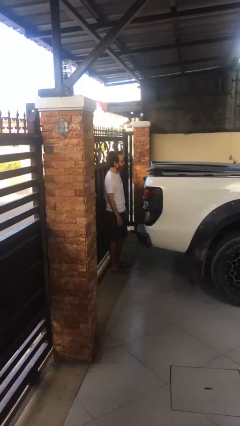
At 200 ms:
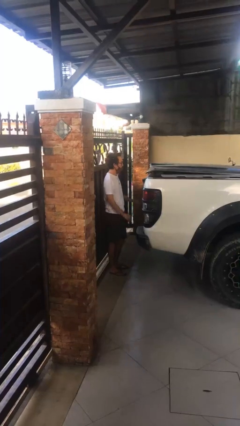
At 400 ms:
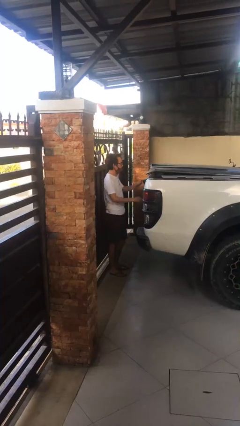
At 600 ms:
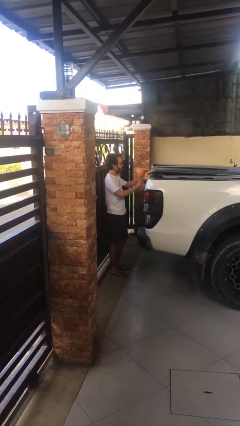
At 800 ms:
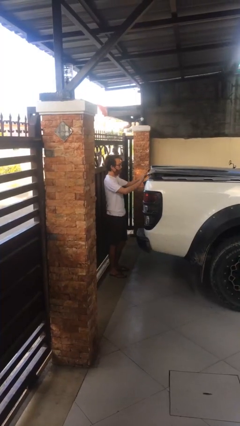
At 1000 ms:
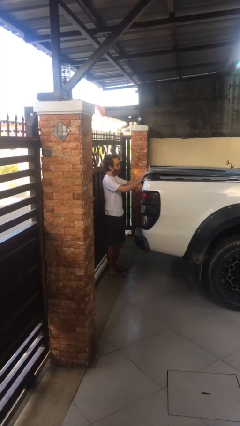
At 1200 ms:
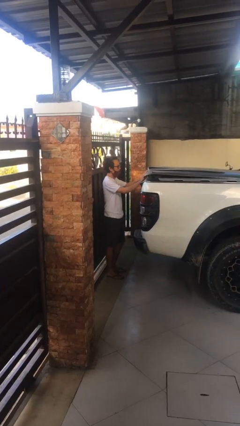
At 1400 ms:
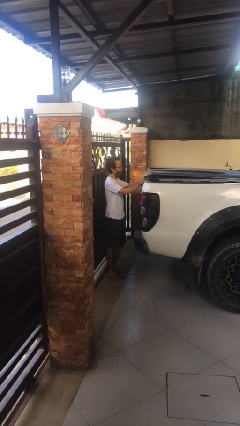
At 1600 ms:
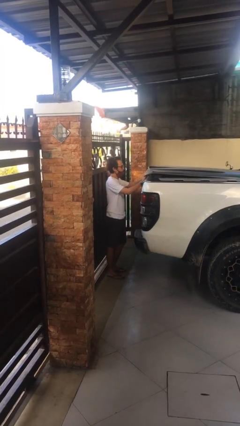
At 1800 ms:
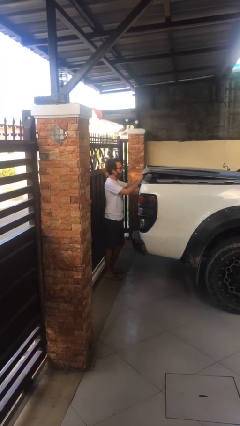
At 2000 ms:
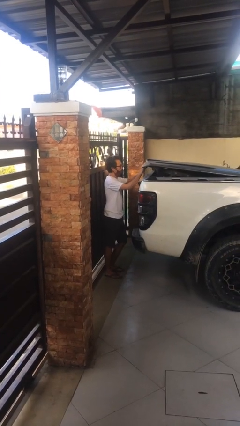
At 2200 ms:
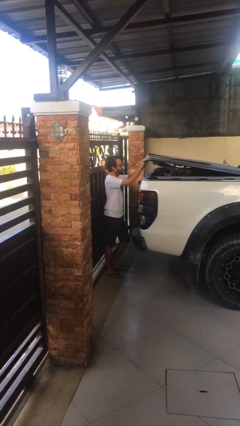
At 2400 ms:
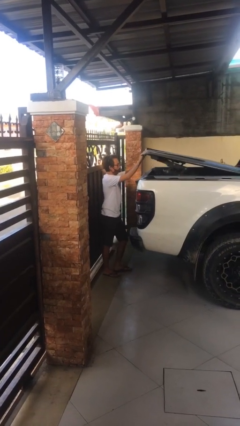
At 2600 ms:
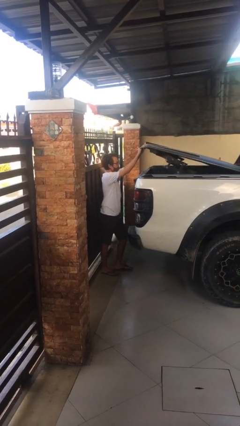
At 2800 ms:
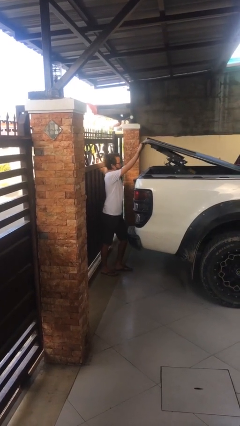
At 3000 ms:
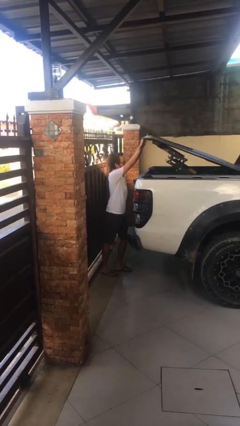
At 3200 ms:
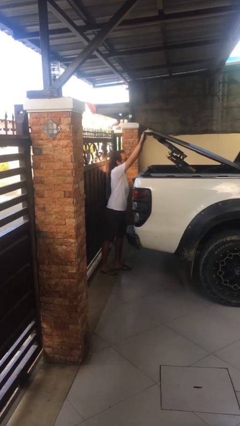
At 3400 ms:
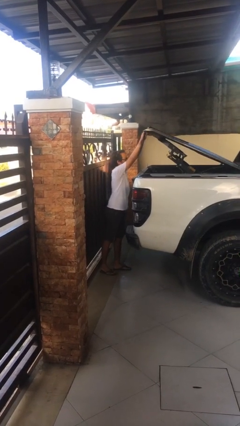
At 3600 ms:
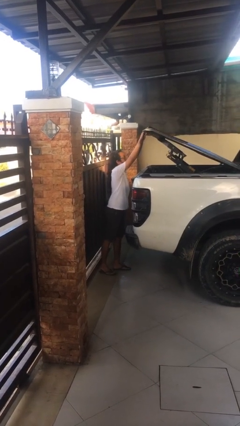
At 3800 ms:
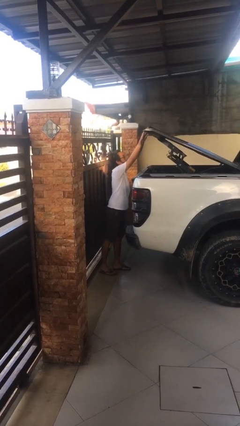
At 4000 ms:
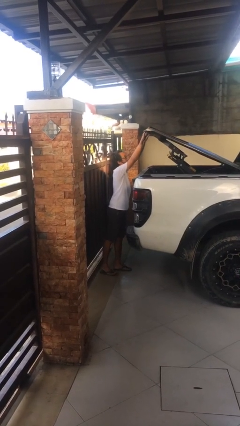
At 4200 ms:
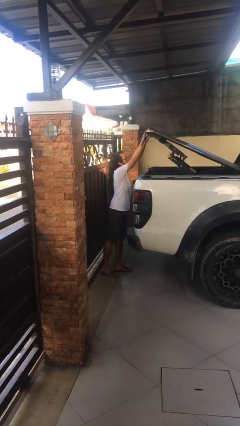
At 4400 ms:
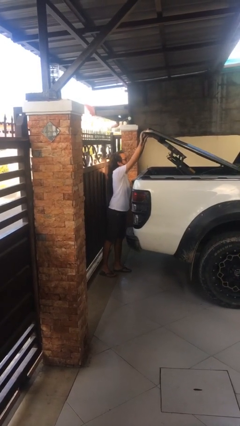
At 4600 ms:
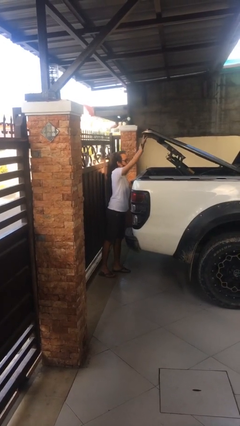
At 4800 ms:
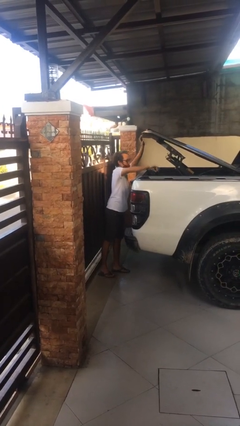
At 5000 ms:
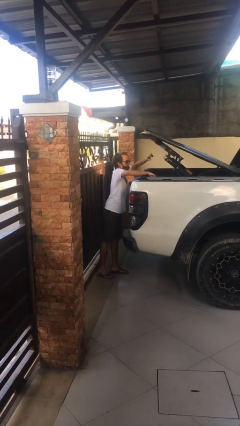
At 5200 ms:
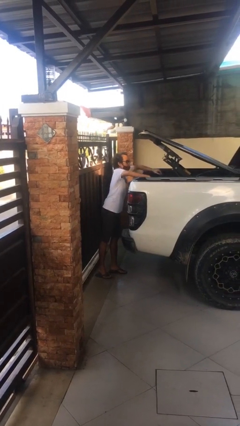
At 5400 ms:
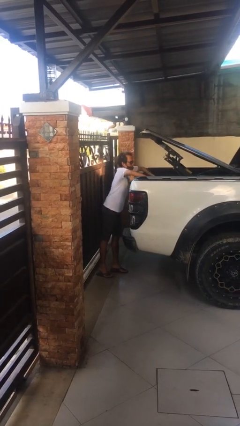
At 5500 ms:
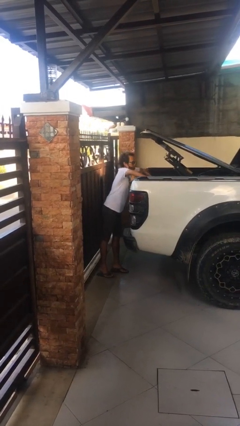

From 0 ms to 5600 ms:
person opens car trunk

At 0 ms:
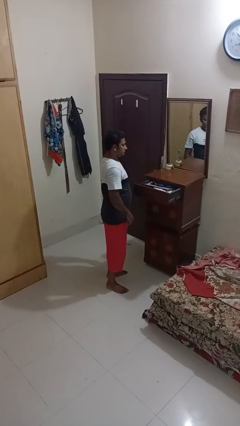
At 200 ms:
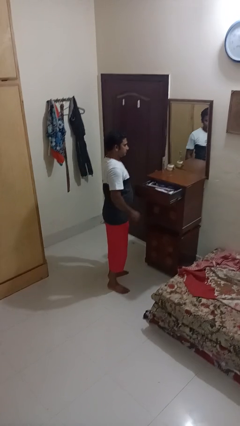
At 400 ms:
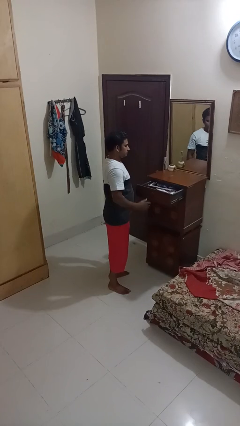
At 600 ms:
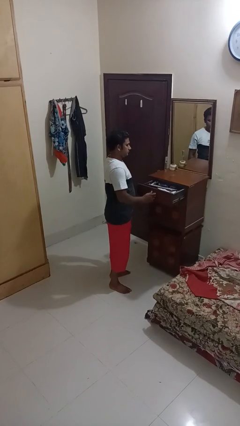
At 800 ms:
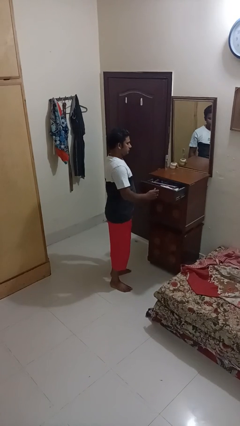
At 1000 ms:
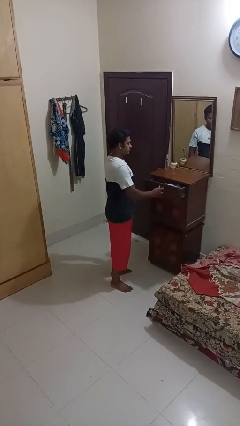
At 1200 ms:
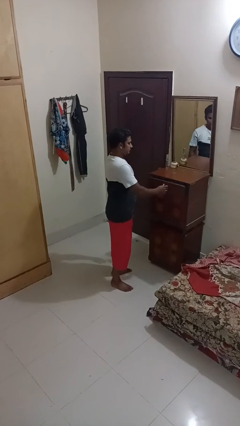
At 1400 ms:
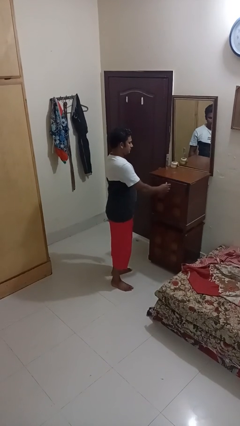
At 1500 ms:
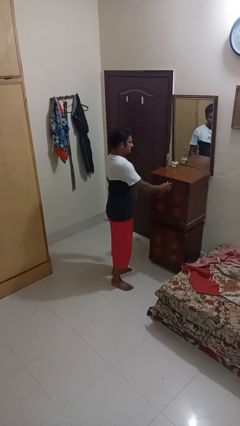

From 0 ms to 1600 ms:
person closes dresser drawer

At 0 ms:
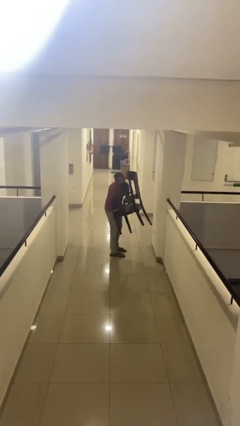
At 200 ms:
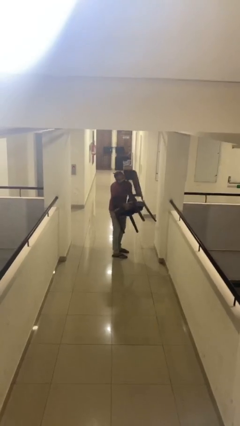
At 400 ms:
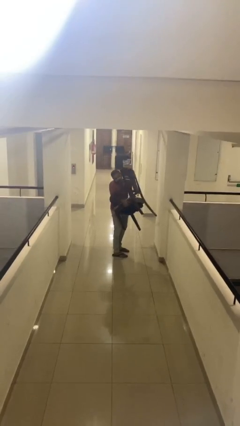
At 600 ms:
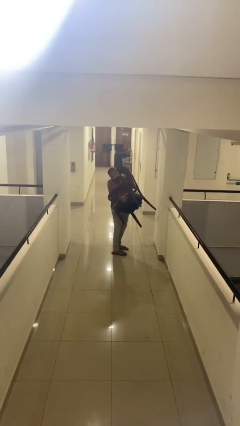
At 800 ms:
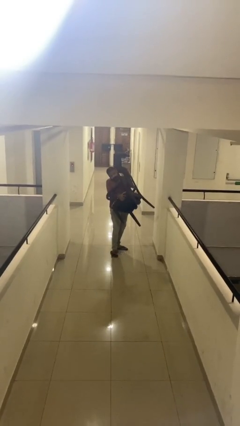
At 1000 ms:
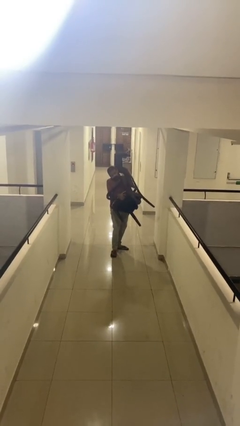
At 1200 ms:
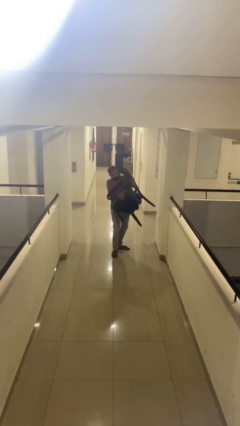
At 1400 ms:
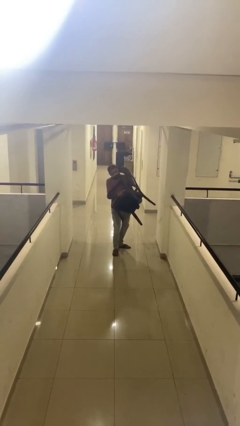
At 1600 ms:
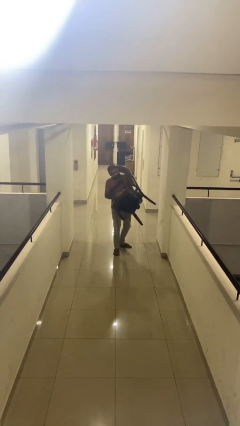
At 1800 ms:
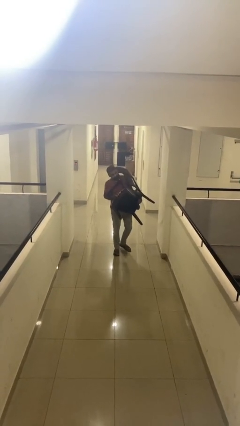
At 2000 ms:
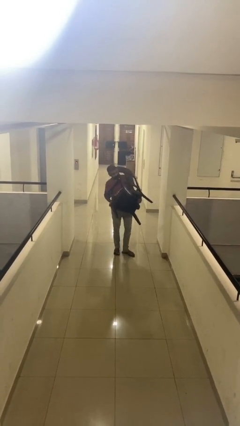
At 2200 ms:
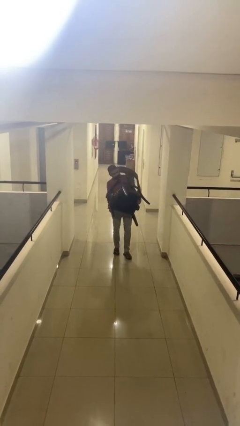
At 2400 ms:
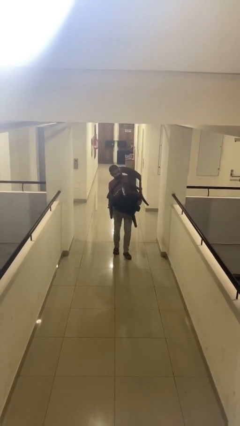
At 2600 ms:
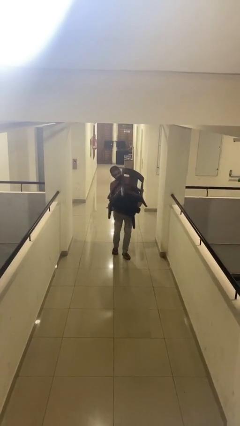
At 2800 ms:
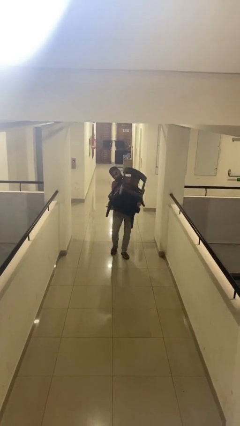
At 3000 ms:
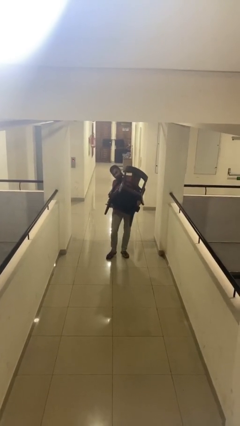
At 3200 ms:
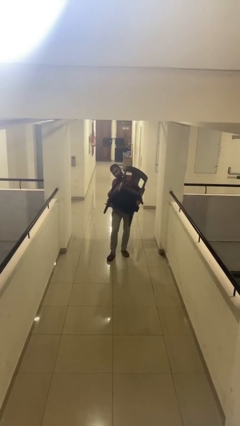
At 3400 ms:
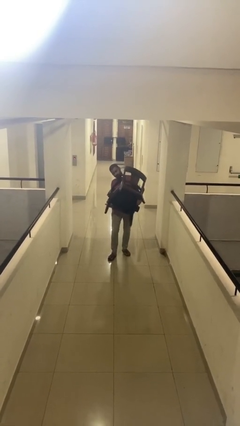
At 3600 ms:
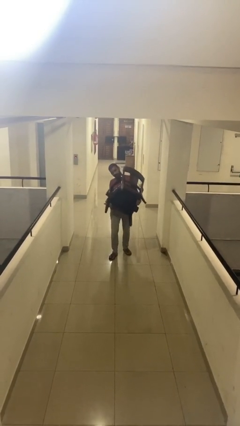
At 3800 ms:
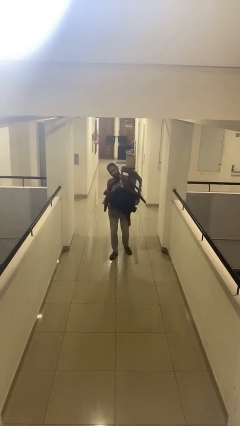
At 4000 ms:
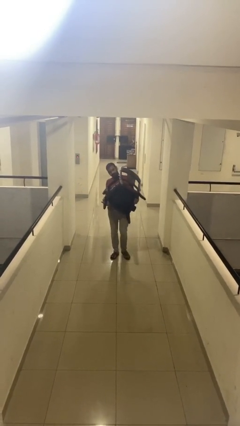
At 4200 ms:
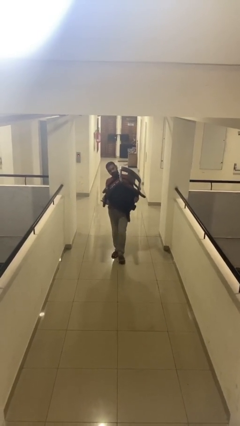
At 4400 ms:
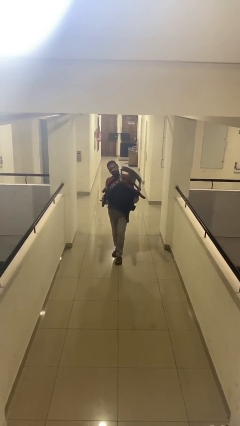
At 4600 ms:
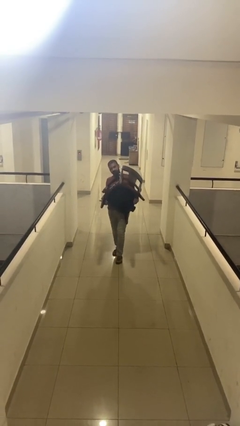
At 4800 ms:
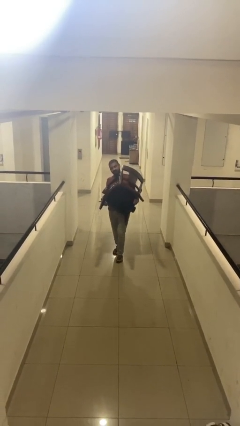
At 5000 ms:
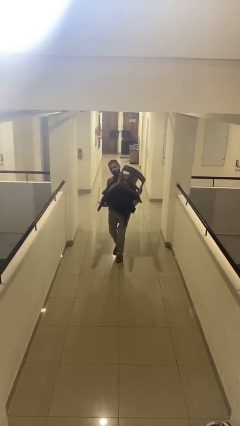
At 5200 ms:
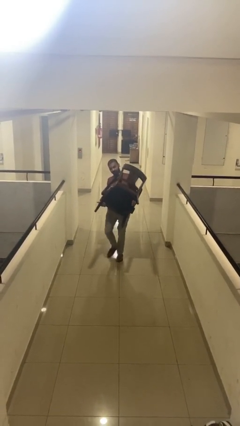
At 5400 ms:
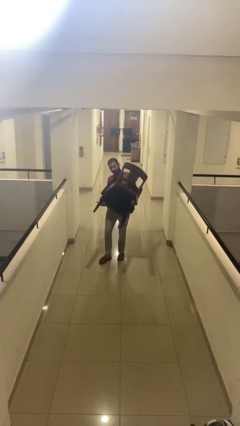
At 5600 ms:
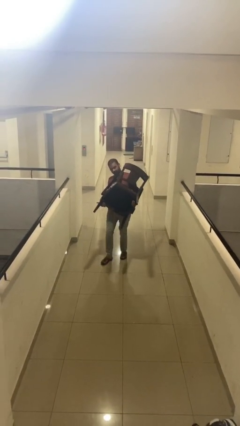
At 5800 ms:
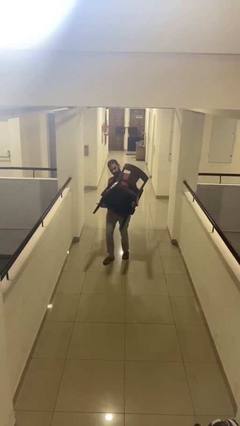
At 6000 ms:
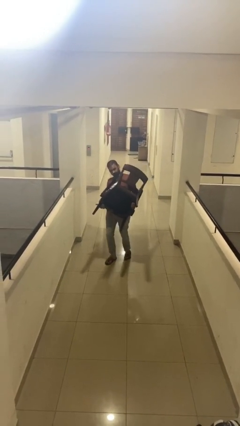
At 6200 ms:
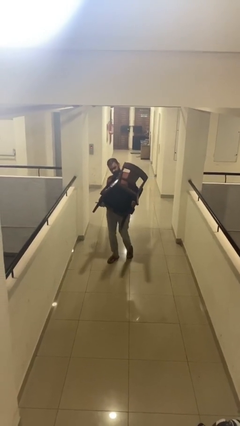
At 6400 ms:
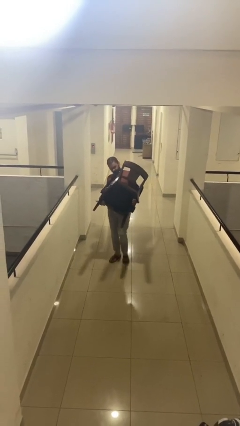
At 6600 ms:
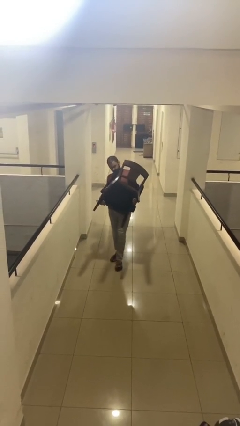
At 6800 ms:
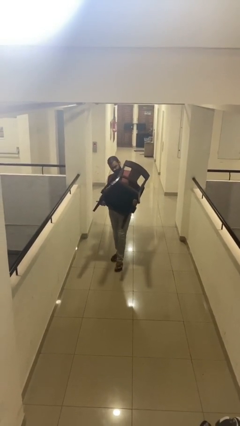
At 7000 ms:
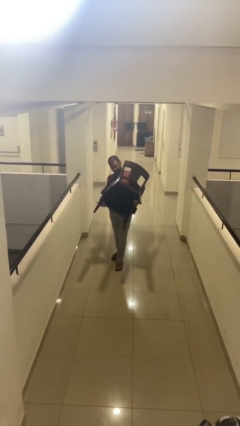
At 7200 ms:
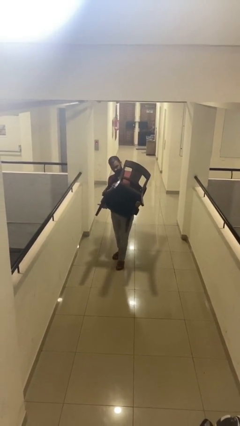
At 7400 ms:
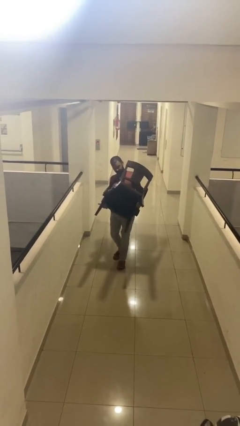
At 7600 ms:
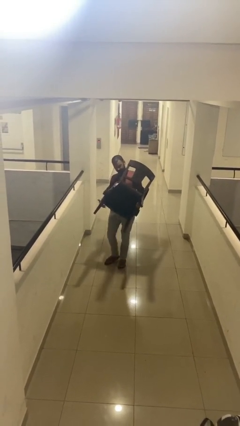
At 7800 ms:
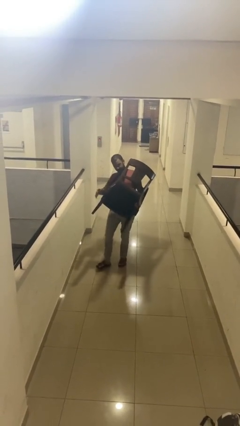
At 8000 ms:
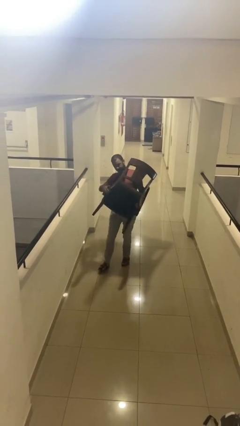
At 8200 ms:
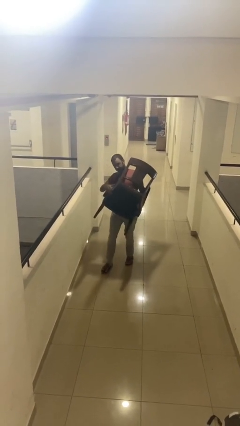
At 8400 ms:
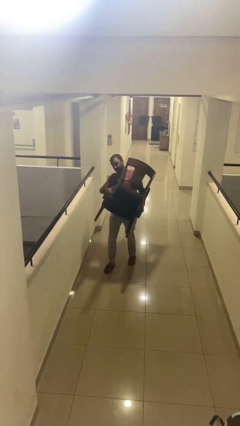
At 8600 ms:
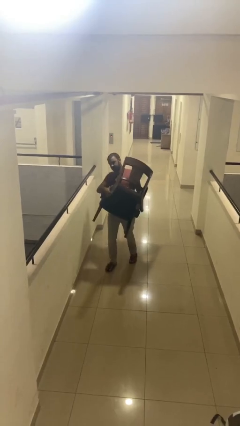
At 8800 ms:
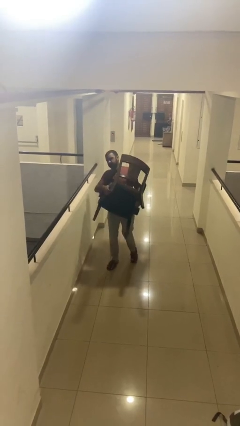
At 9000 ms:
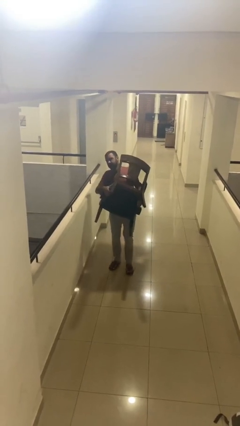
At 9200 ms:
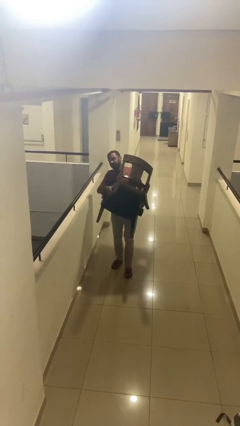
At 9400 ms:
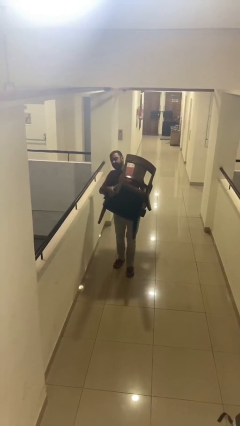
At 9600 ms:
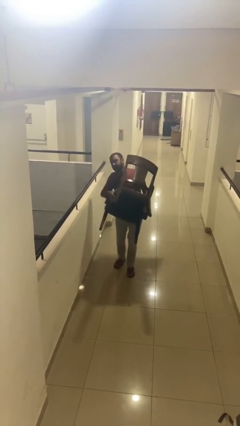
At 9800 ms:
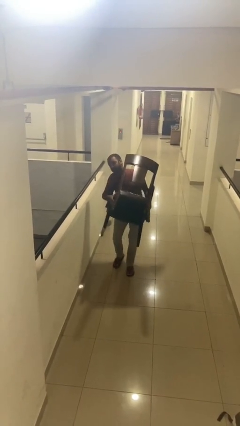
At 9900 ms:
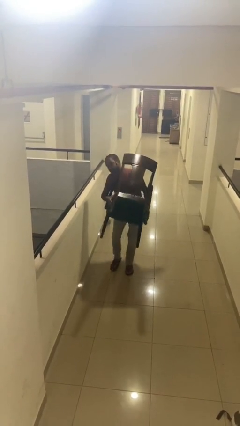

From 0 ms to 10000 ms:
person carries heavy object

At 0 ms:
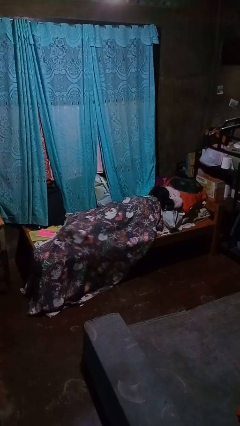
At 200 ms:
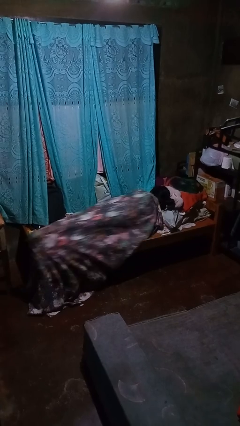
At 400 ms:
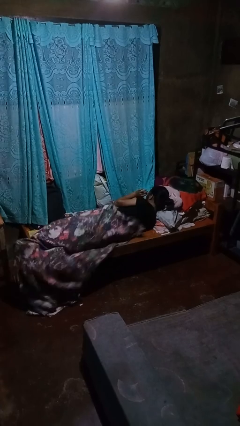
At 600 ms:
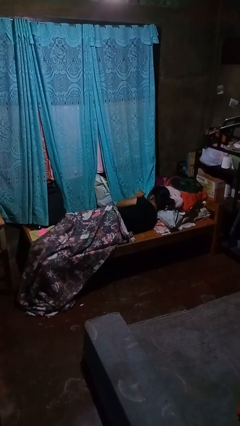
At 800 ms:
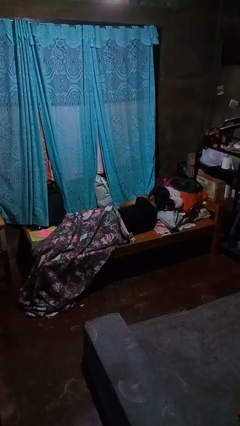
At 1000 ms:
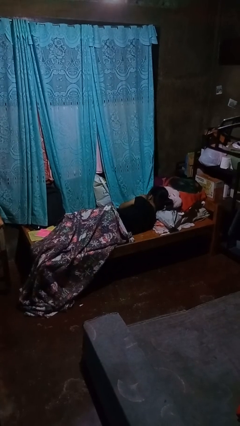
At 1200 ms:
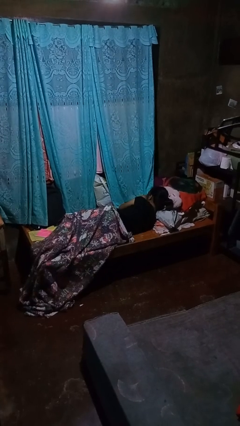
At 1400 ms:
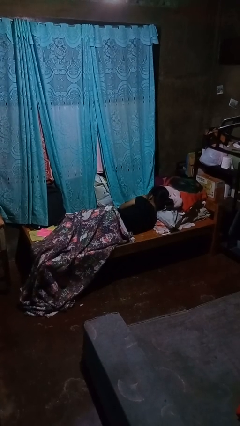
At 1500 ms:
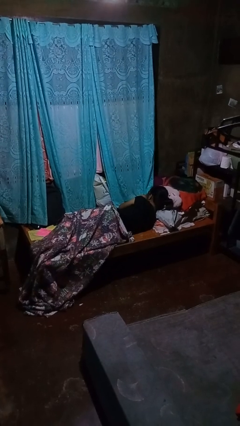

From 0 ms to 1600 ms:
person uncovers with bedsheets
